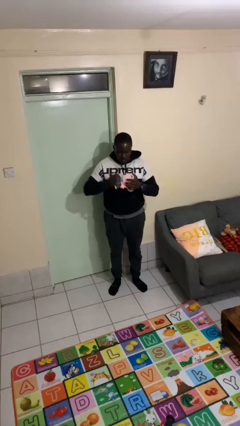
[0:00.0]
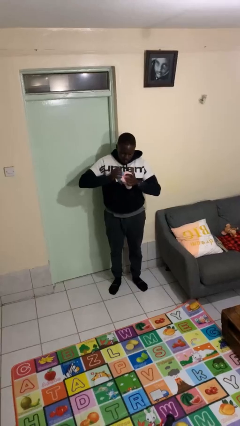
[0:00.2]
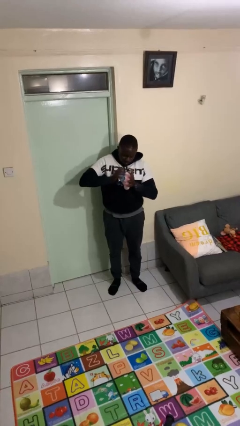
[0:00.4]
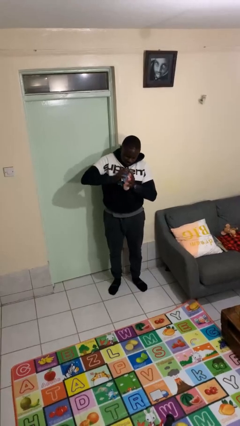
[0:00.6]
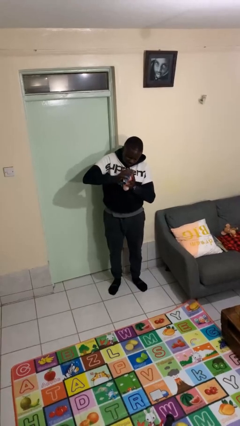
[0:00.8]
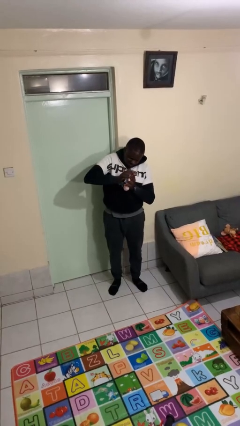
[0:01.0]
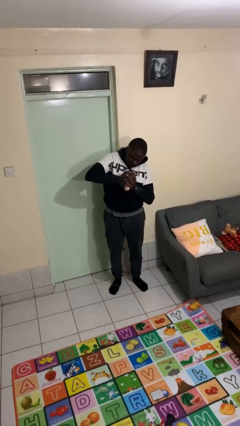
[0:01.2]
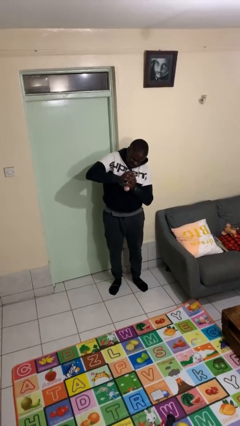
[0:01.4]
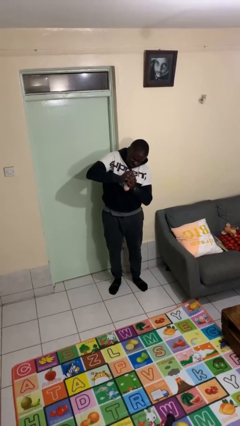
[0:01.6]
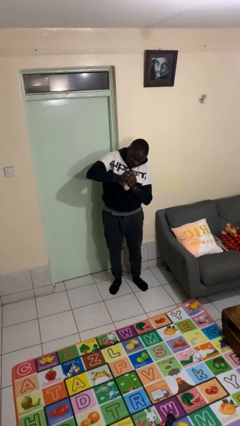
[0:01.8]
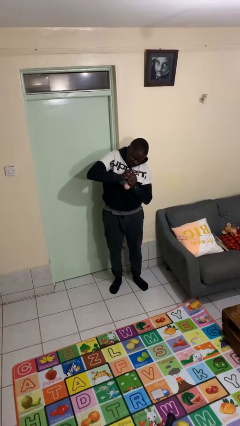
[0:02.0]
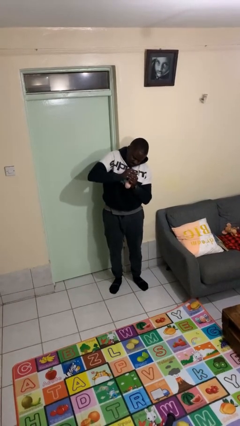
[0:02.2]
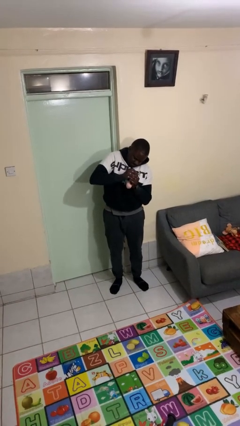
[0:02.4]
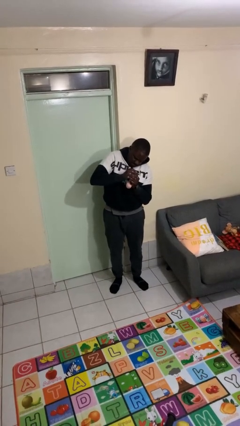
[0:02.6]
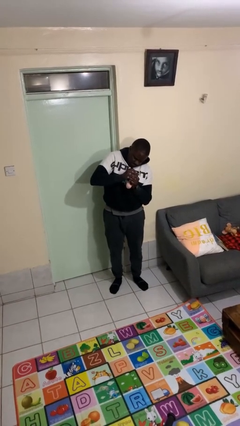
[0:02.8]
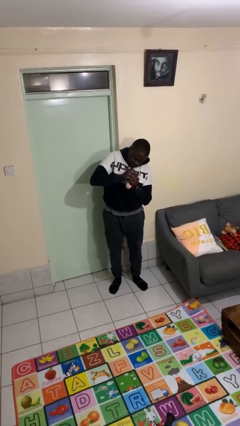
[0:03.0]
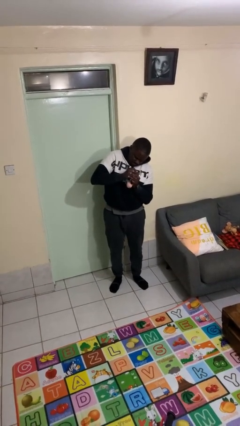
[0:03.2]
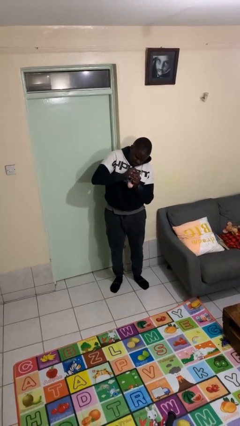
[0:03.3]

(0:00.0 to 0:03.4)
person squeezes object

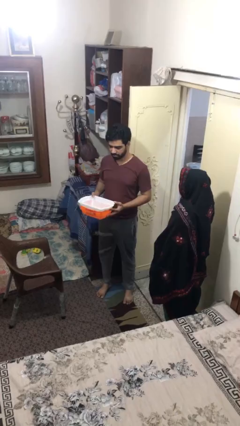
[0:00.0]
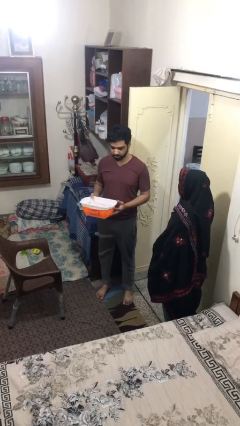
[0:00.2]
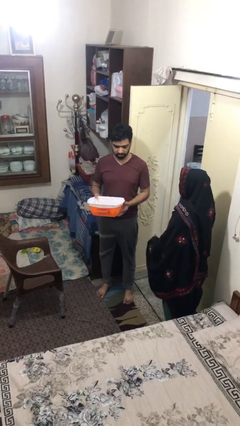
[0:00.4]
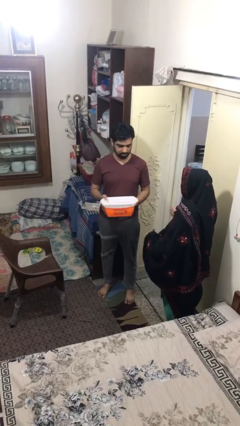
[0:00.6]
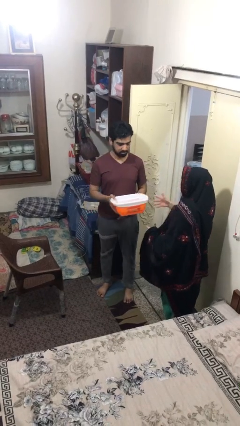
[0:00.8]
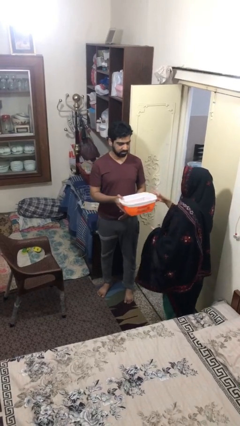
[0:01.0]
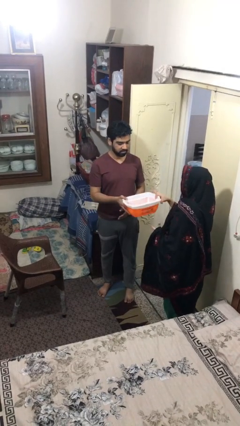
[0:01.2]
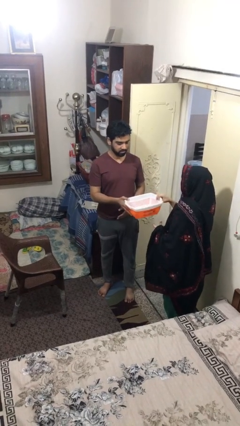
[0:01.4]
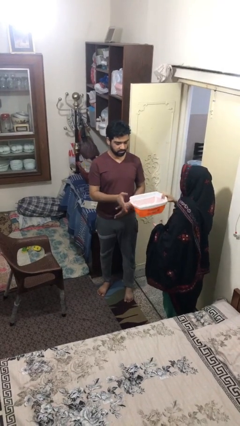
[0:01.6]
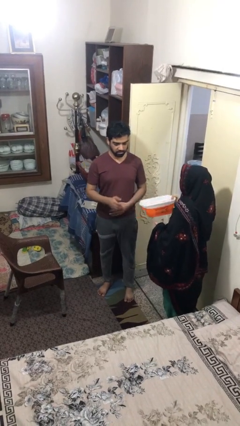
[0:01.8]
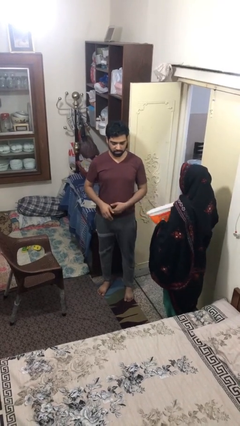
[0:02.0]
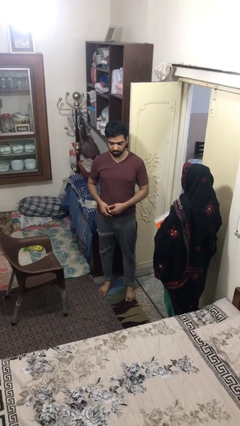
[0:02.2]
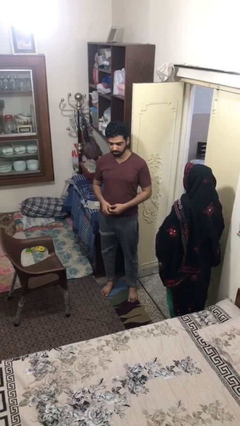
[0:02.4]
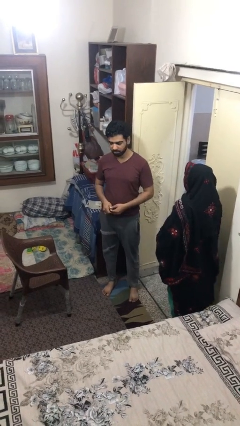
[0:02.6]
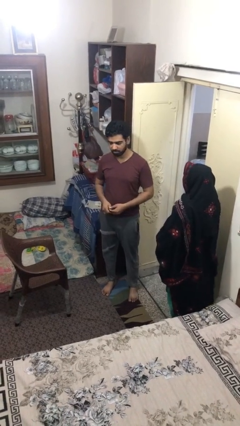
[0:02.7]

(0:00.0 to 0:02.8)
person transfers object to person

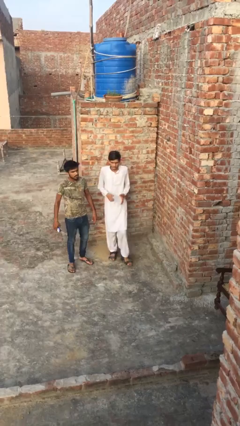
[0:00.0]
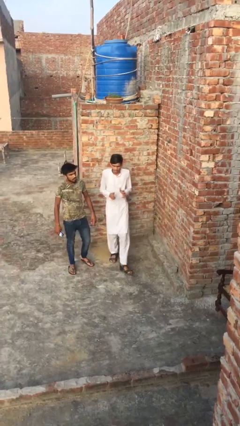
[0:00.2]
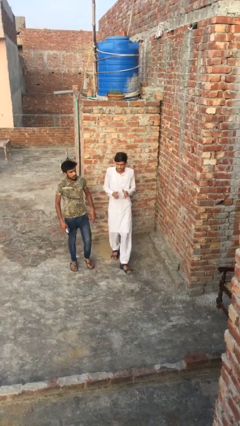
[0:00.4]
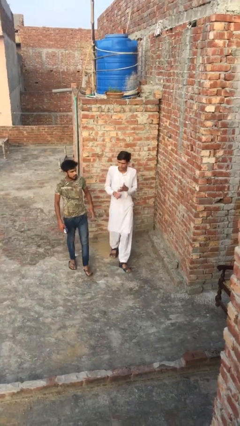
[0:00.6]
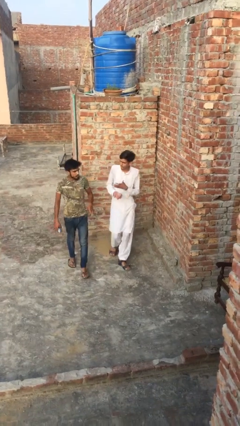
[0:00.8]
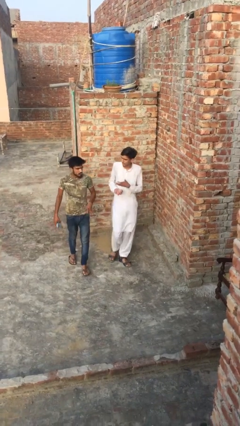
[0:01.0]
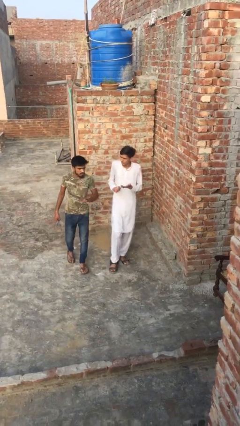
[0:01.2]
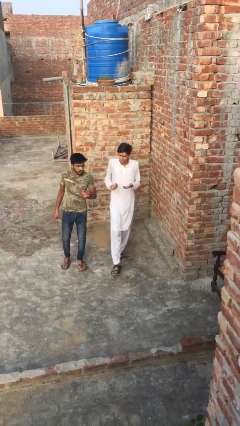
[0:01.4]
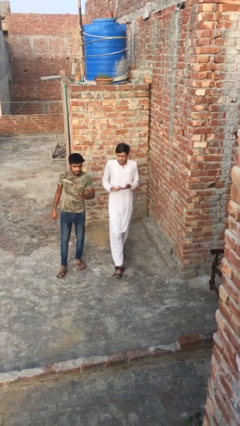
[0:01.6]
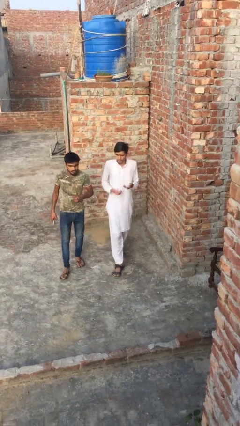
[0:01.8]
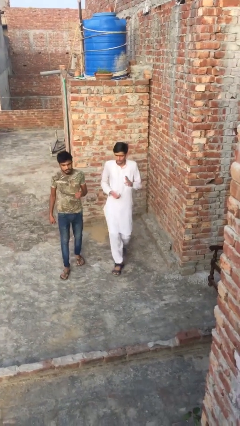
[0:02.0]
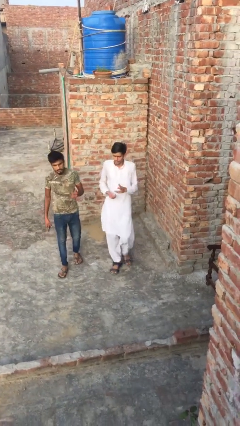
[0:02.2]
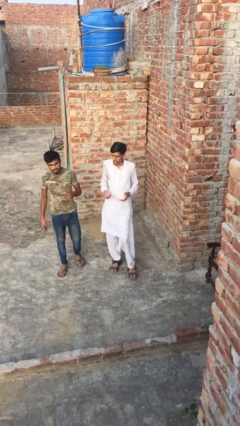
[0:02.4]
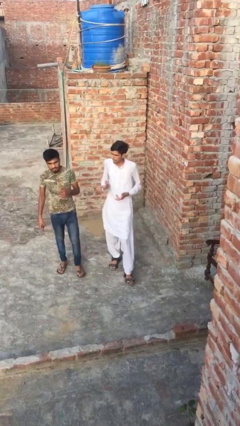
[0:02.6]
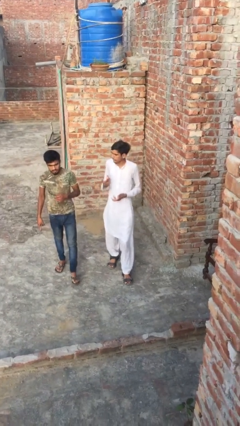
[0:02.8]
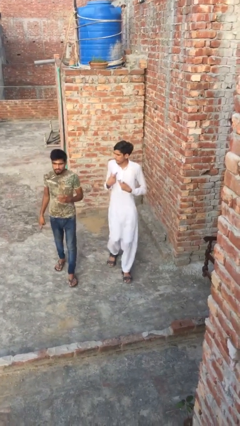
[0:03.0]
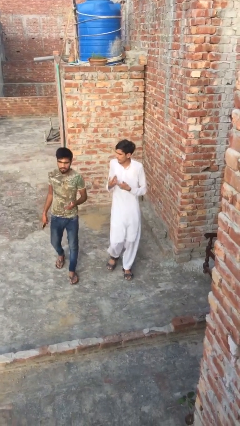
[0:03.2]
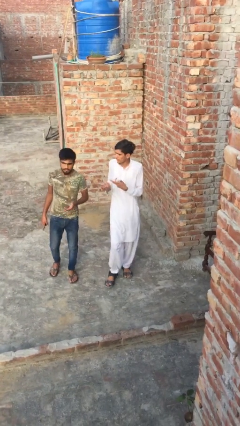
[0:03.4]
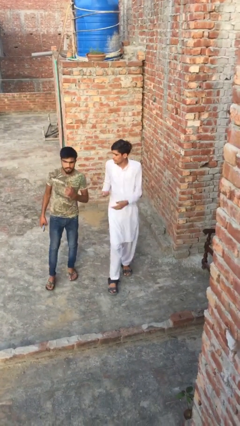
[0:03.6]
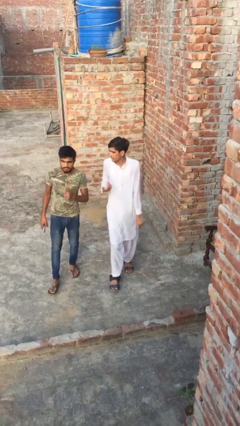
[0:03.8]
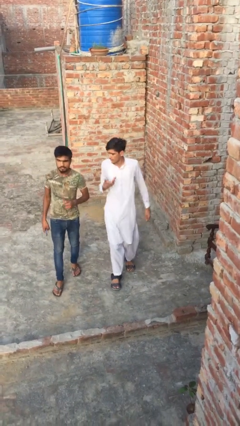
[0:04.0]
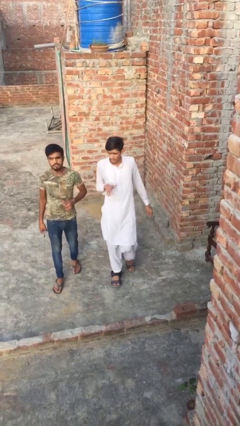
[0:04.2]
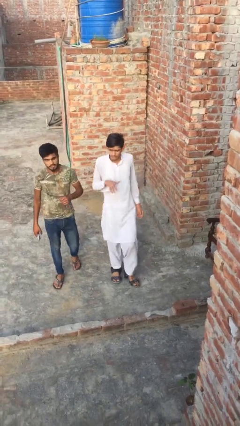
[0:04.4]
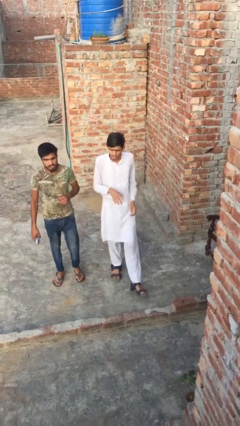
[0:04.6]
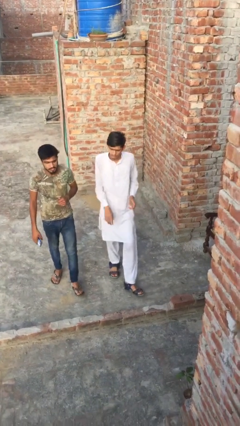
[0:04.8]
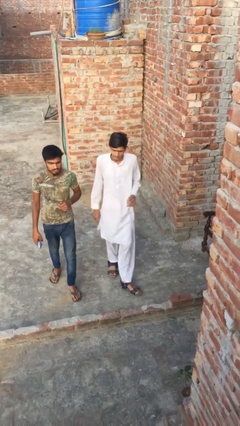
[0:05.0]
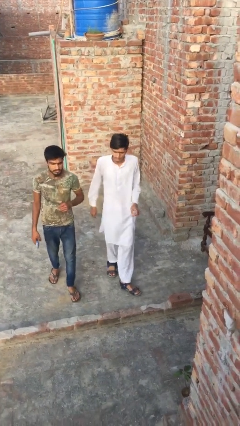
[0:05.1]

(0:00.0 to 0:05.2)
person talks to person

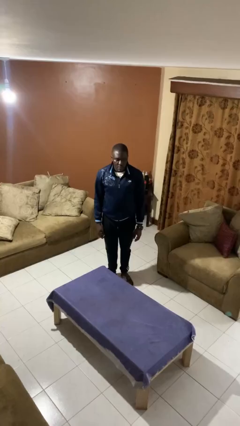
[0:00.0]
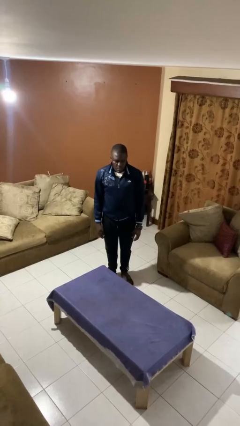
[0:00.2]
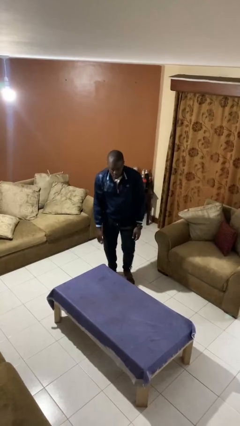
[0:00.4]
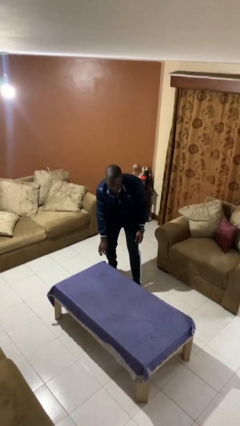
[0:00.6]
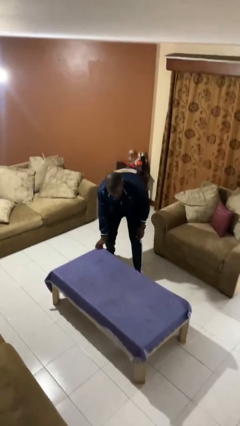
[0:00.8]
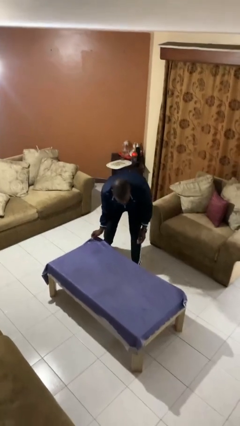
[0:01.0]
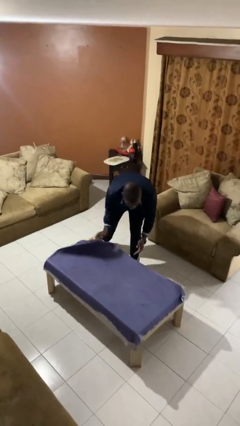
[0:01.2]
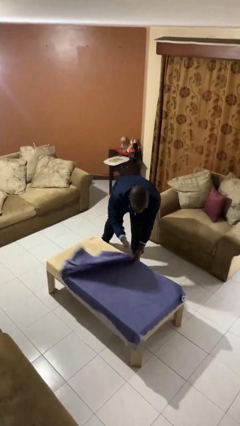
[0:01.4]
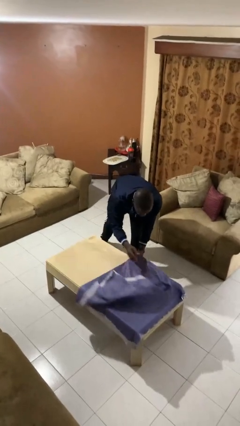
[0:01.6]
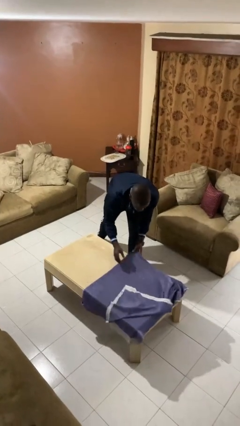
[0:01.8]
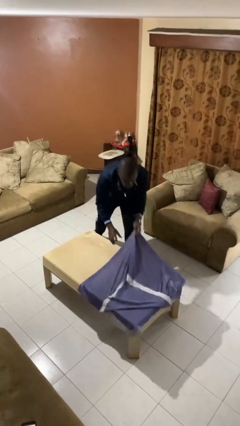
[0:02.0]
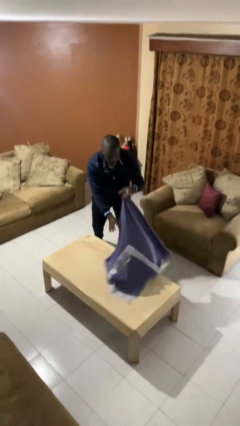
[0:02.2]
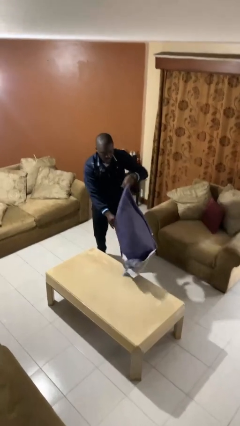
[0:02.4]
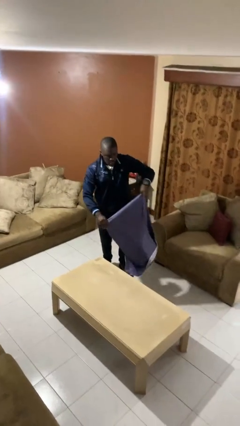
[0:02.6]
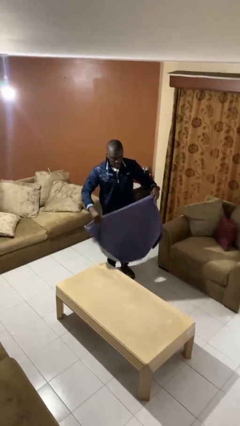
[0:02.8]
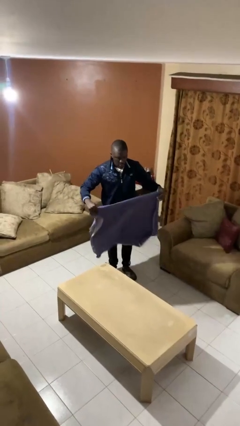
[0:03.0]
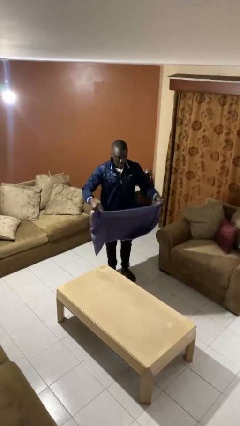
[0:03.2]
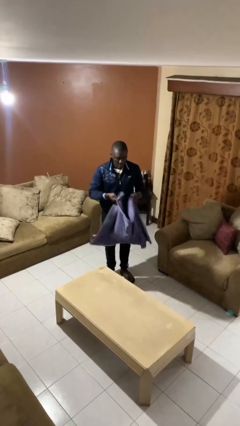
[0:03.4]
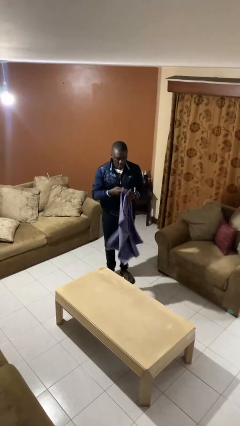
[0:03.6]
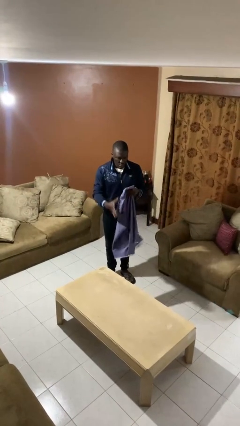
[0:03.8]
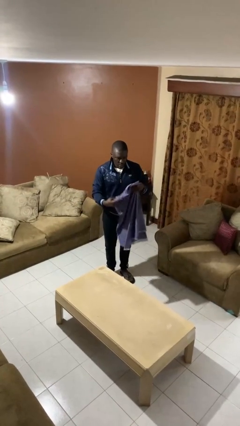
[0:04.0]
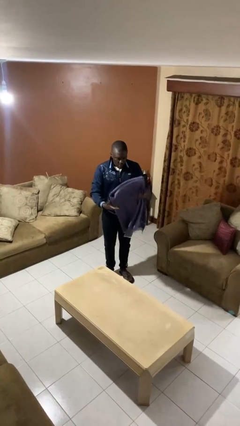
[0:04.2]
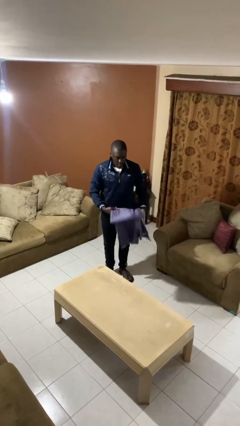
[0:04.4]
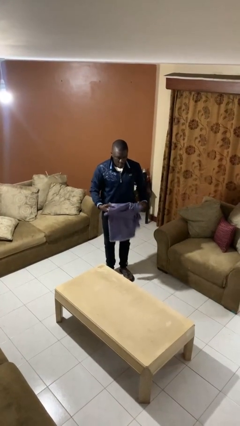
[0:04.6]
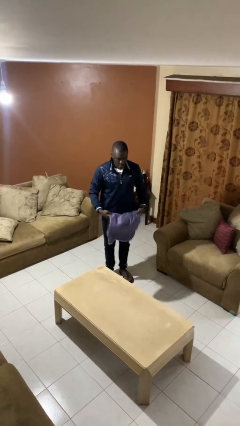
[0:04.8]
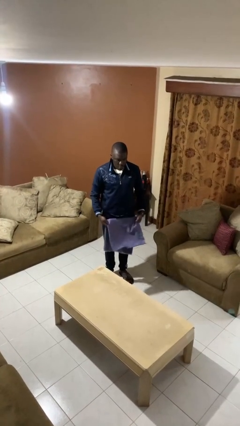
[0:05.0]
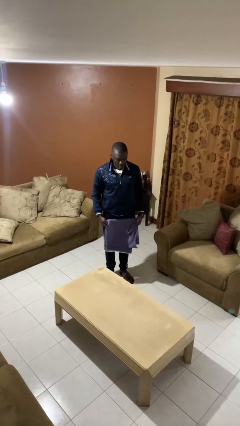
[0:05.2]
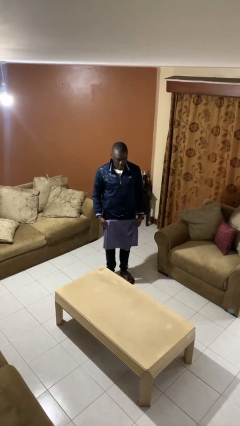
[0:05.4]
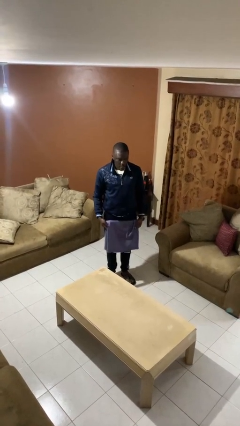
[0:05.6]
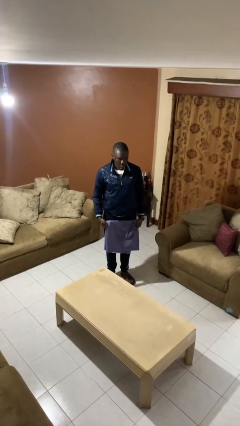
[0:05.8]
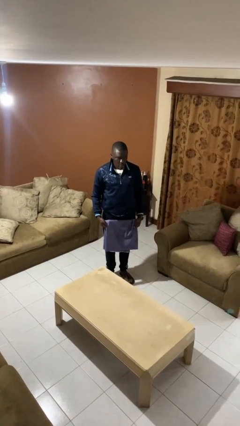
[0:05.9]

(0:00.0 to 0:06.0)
person folds tablecloth

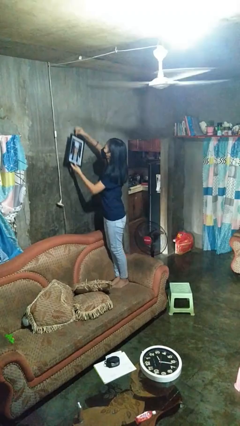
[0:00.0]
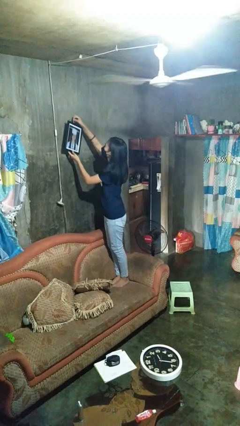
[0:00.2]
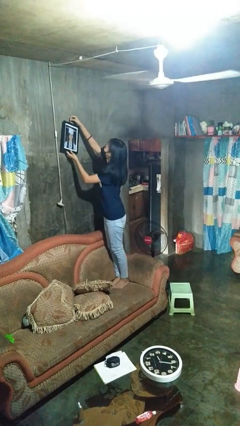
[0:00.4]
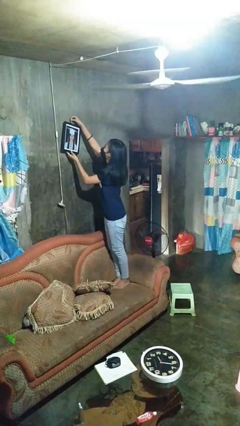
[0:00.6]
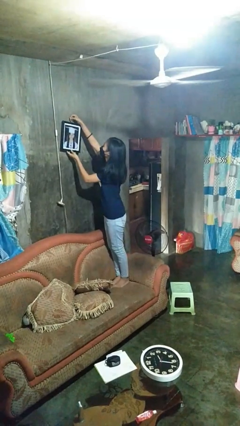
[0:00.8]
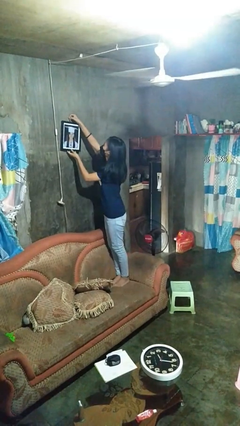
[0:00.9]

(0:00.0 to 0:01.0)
person puts up picture frame
